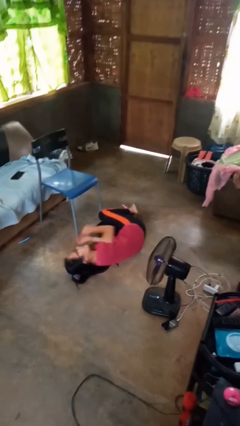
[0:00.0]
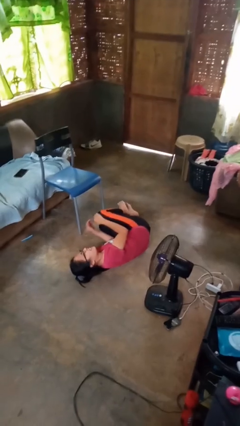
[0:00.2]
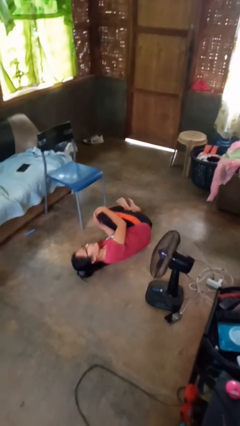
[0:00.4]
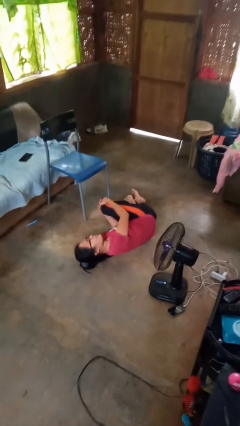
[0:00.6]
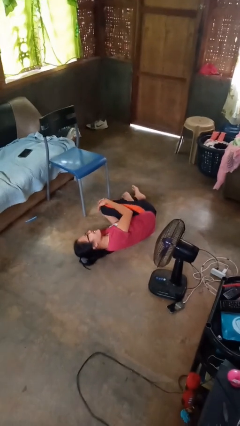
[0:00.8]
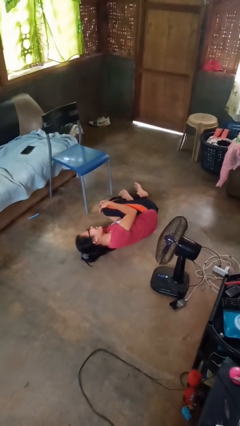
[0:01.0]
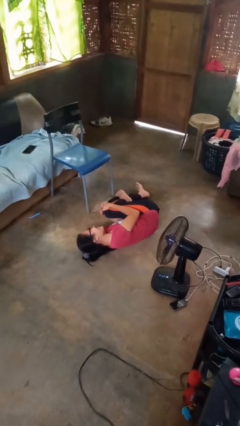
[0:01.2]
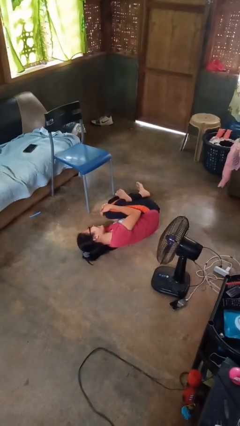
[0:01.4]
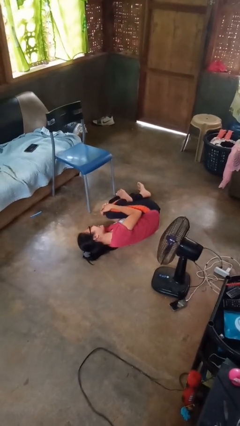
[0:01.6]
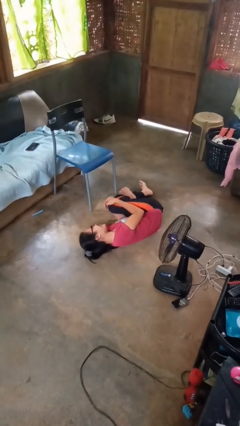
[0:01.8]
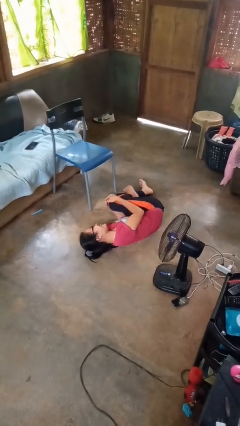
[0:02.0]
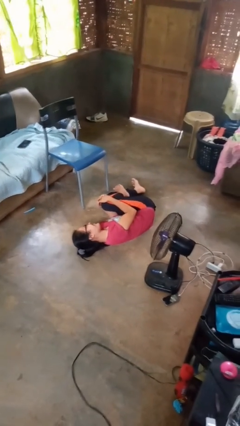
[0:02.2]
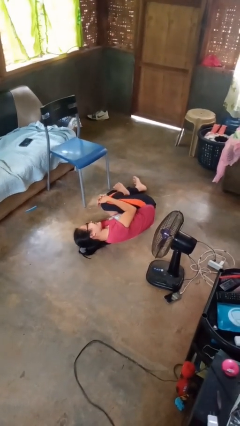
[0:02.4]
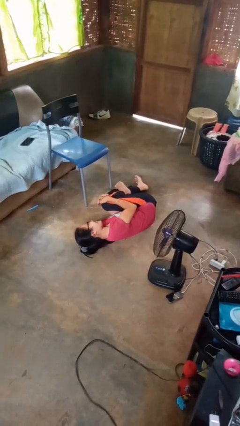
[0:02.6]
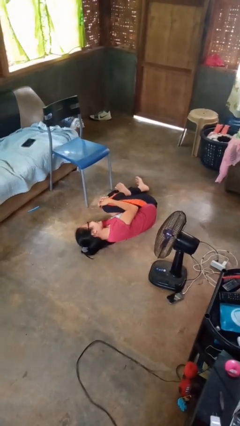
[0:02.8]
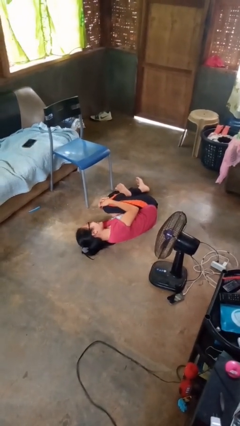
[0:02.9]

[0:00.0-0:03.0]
person lies down on floor

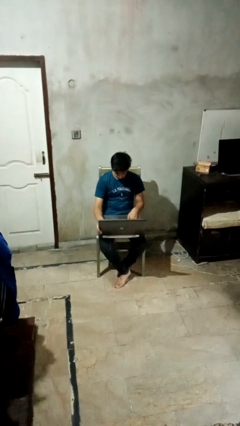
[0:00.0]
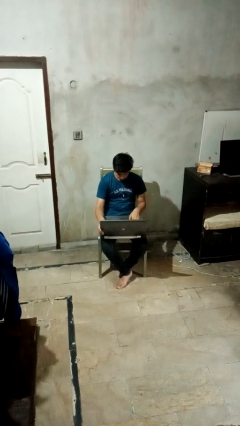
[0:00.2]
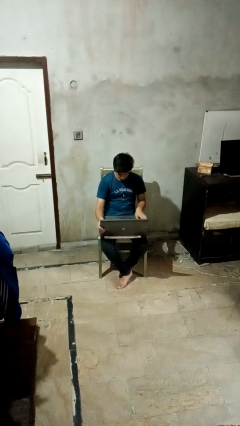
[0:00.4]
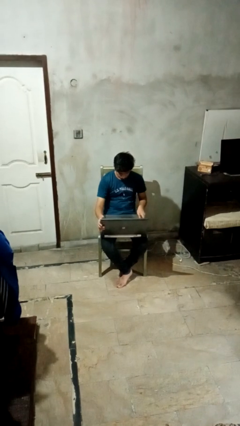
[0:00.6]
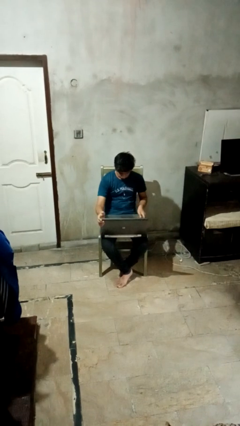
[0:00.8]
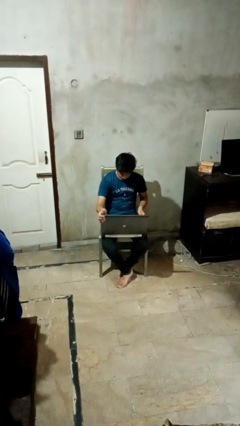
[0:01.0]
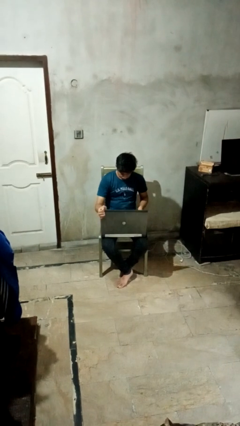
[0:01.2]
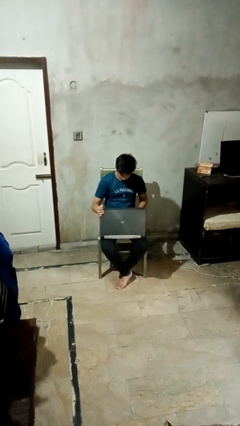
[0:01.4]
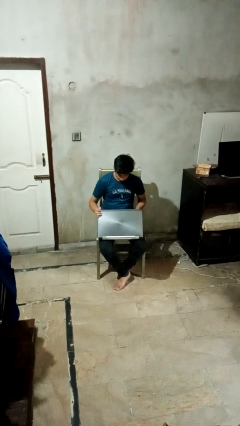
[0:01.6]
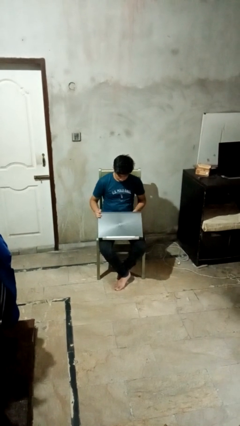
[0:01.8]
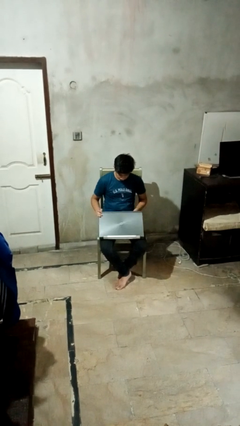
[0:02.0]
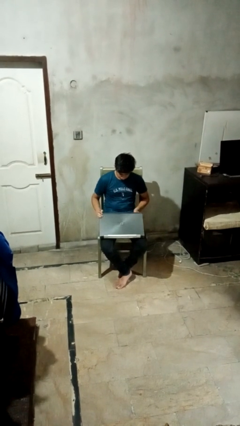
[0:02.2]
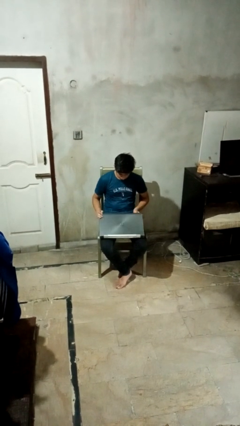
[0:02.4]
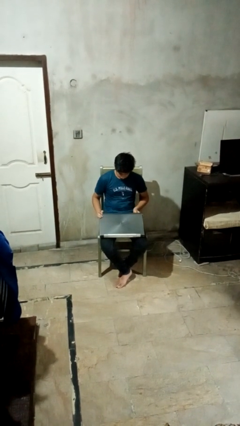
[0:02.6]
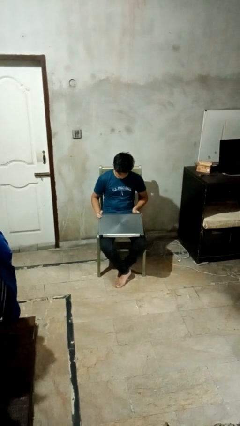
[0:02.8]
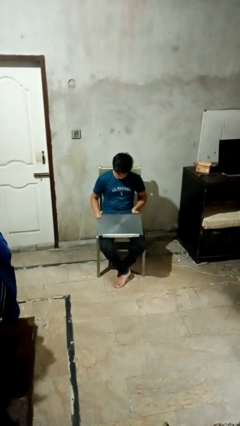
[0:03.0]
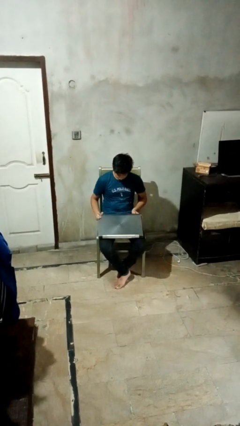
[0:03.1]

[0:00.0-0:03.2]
person closes laptop

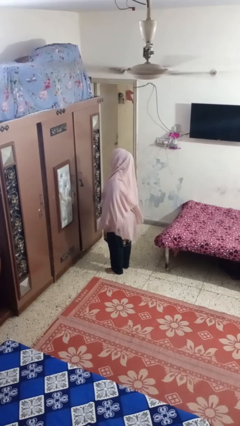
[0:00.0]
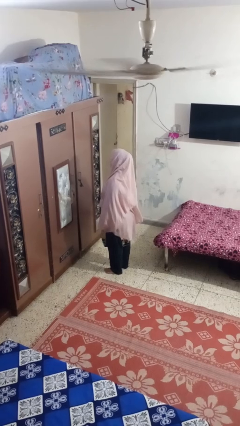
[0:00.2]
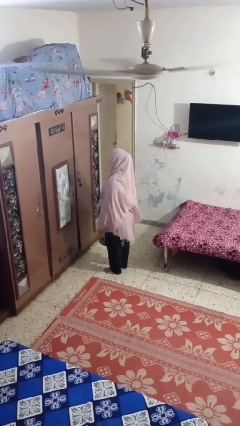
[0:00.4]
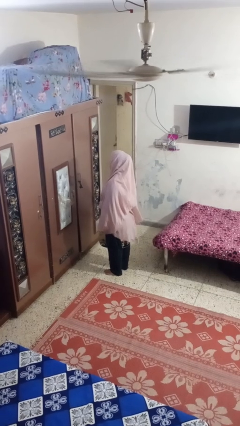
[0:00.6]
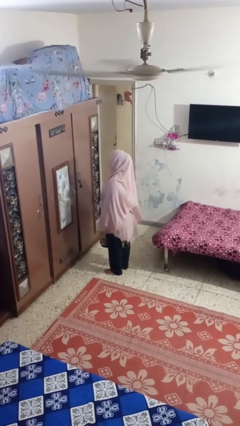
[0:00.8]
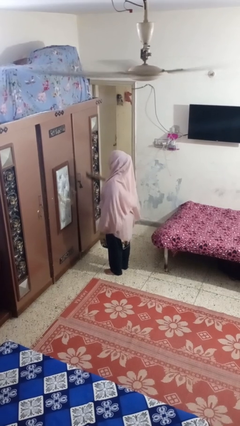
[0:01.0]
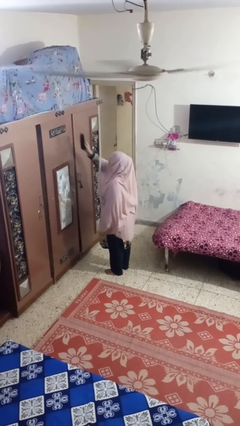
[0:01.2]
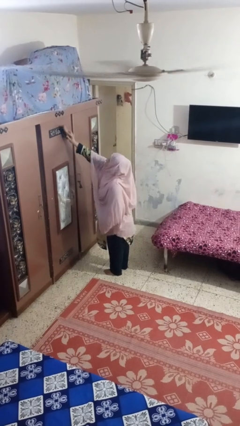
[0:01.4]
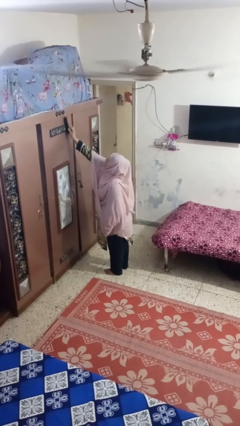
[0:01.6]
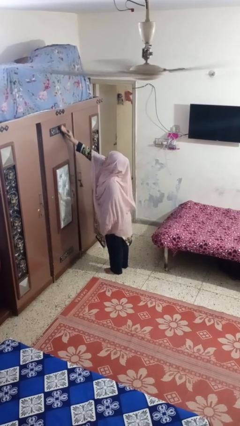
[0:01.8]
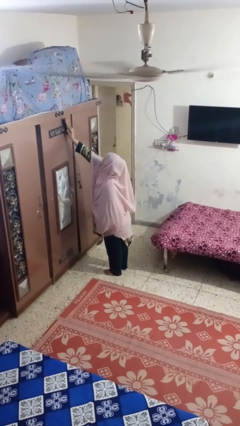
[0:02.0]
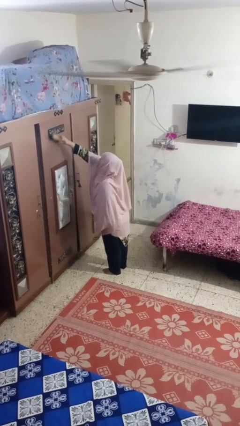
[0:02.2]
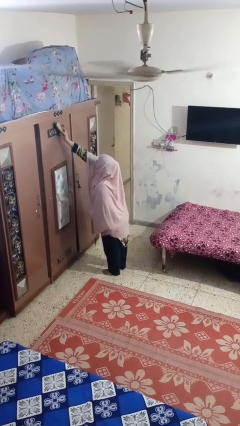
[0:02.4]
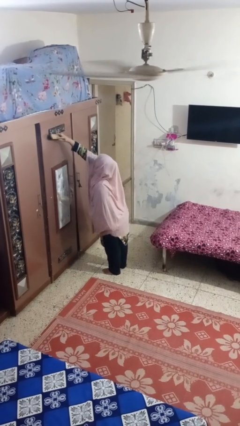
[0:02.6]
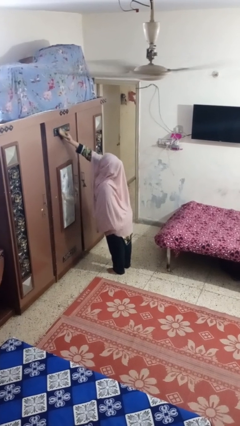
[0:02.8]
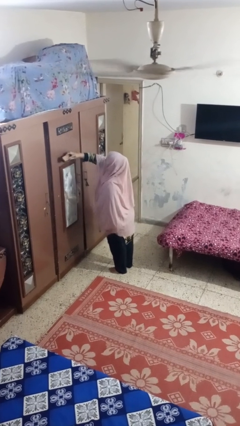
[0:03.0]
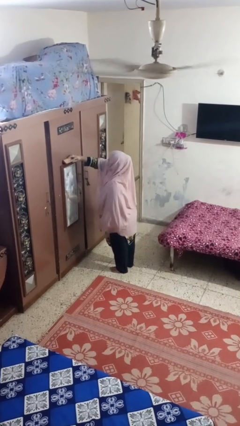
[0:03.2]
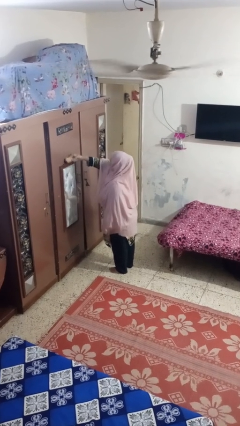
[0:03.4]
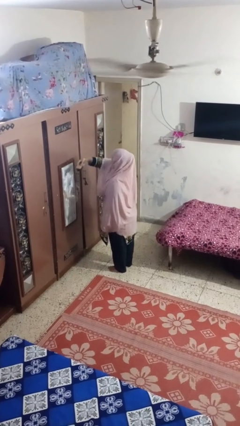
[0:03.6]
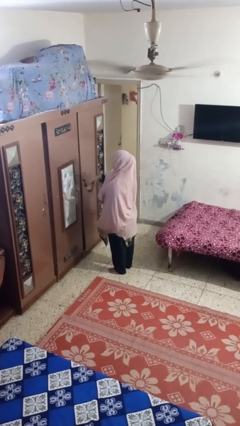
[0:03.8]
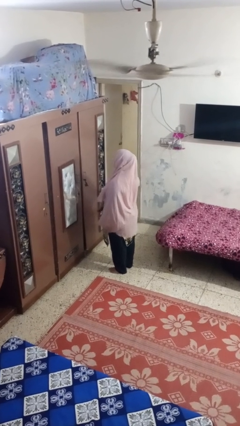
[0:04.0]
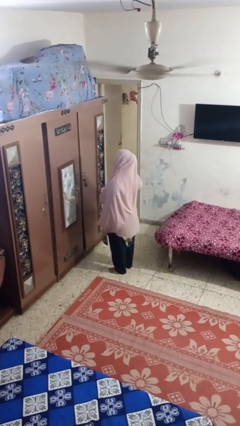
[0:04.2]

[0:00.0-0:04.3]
person dusts furniture

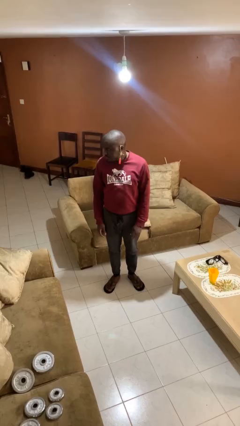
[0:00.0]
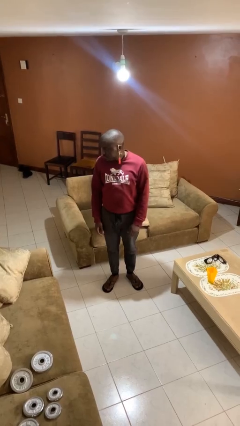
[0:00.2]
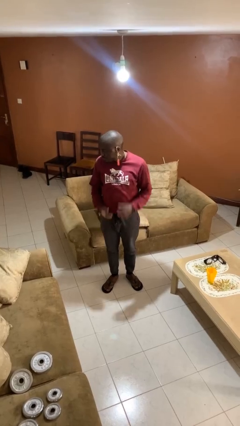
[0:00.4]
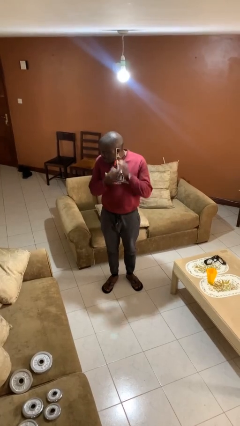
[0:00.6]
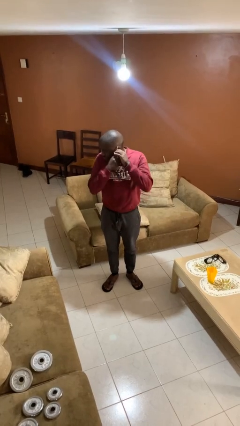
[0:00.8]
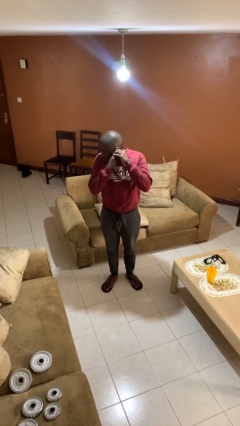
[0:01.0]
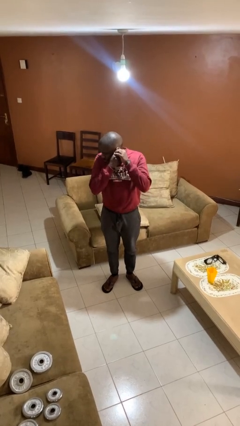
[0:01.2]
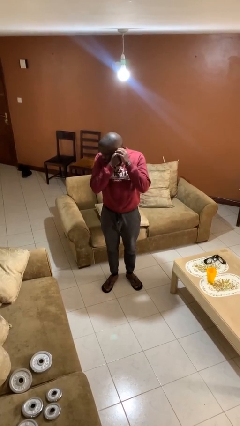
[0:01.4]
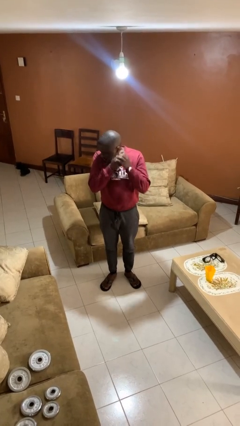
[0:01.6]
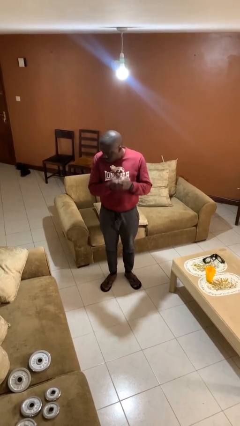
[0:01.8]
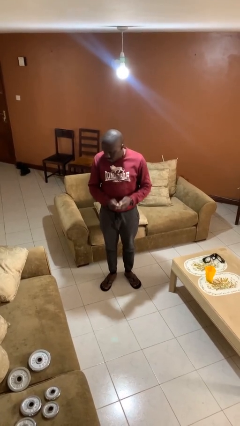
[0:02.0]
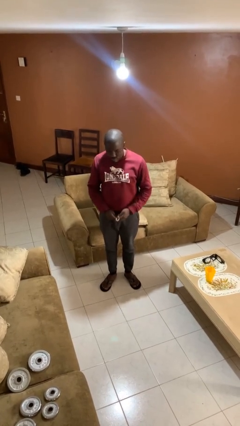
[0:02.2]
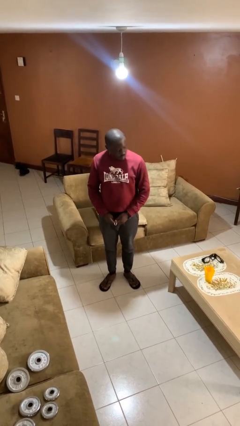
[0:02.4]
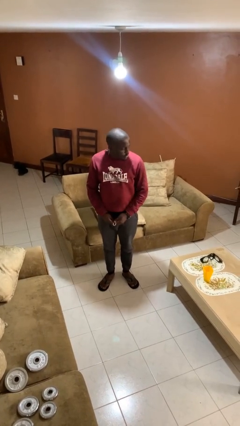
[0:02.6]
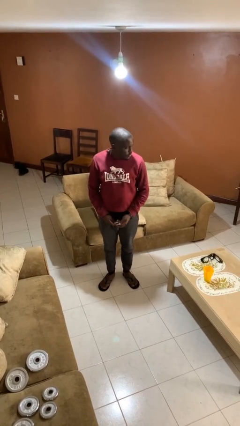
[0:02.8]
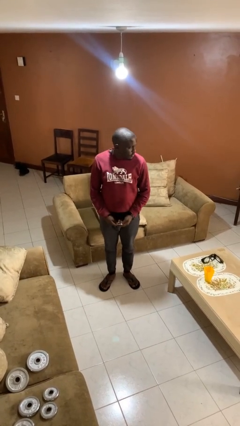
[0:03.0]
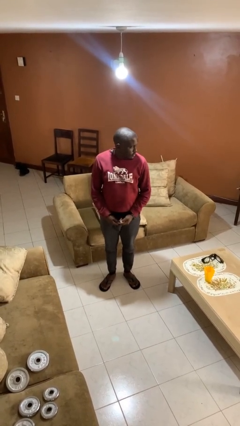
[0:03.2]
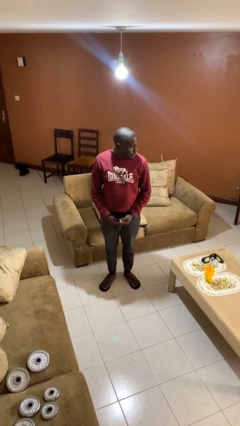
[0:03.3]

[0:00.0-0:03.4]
person takes off earrings

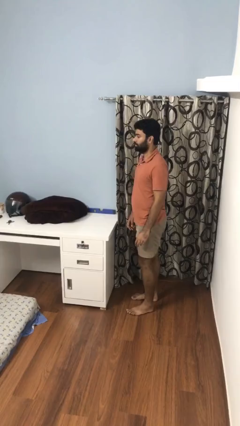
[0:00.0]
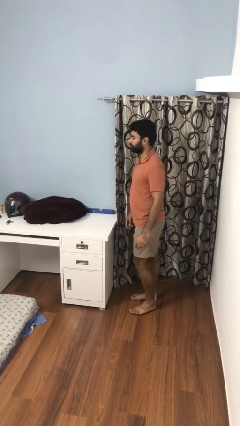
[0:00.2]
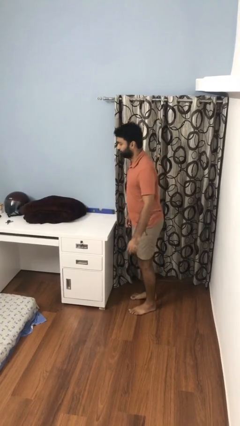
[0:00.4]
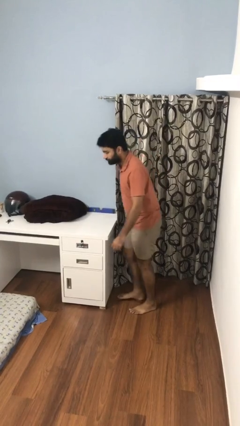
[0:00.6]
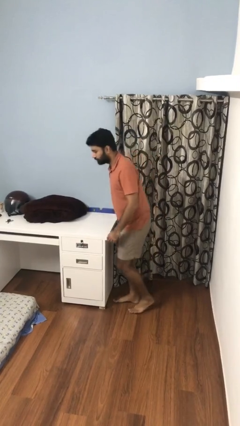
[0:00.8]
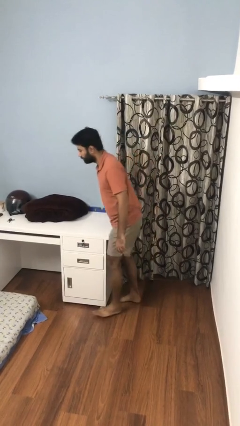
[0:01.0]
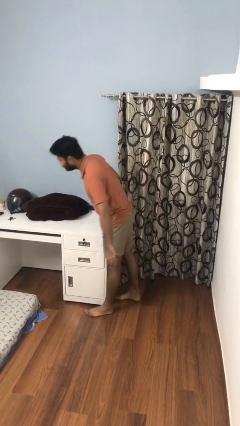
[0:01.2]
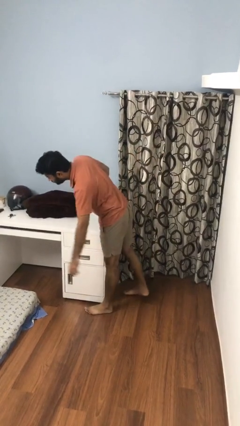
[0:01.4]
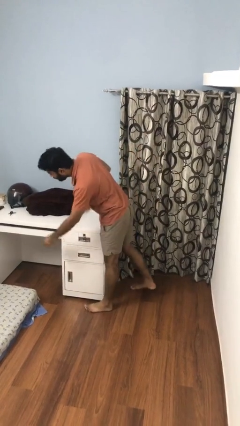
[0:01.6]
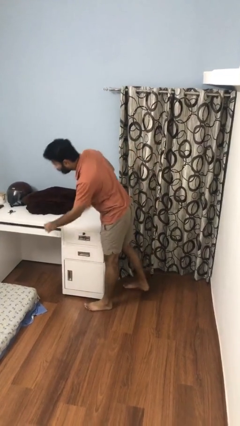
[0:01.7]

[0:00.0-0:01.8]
person bumps into table

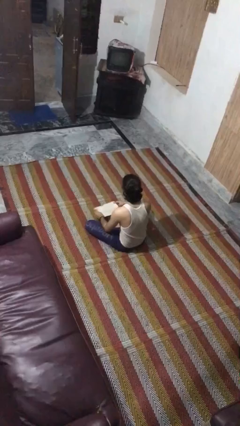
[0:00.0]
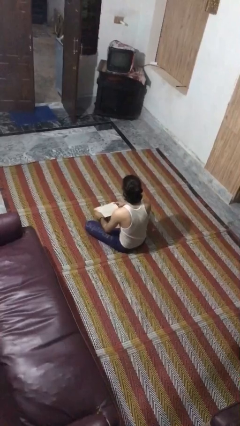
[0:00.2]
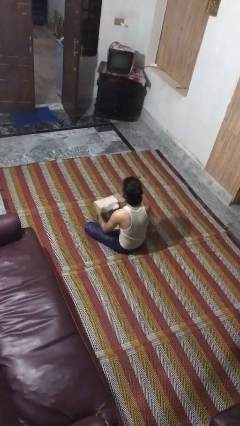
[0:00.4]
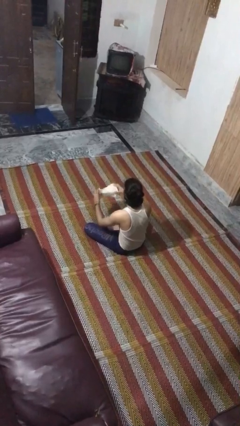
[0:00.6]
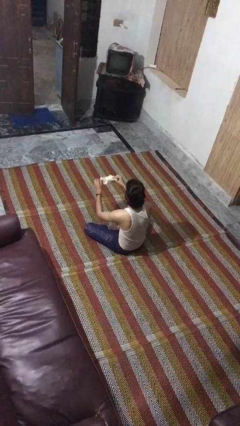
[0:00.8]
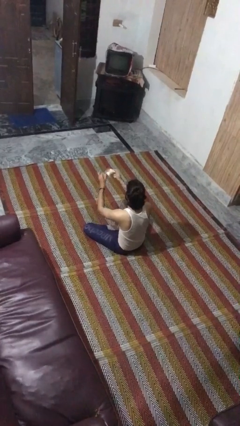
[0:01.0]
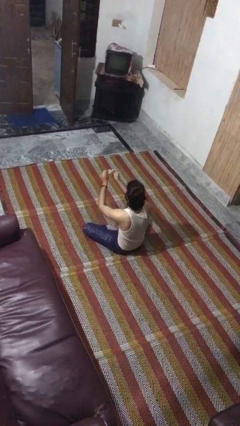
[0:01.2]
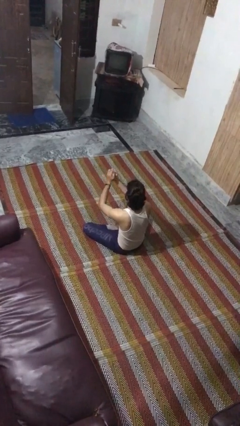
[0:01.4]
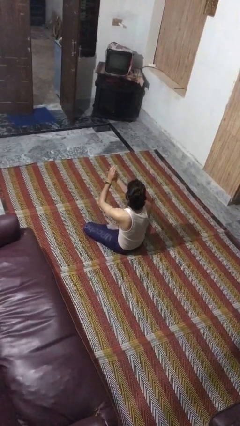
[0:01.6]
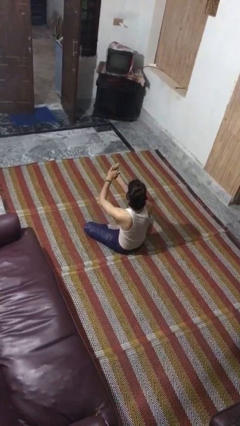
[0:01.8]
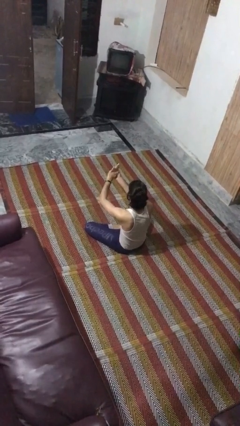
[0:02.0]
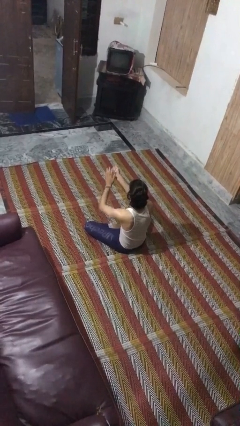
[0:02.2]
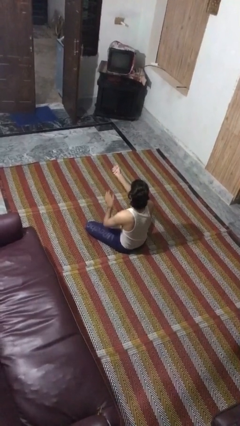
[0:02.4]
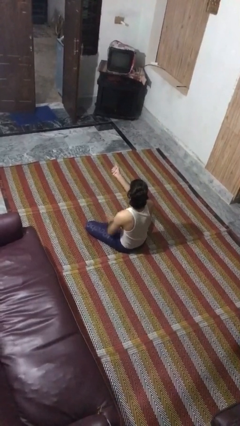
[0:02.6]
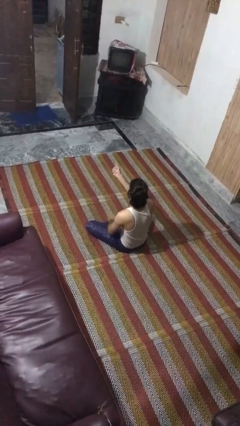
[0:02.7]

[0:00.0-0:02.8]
person crumples paper
